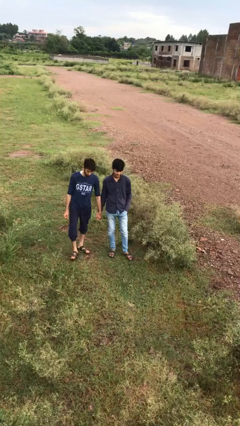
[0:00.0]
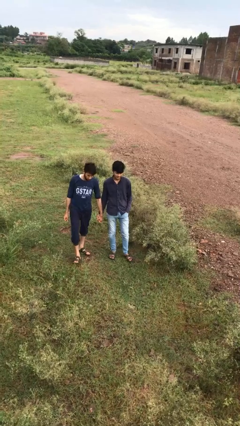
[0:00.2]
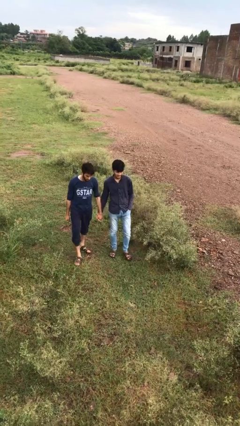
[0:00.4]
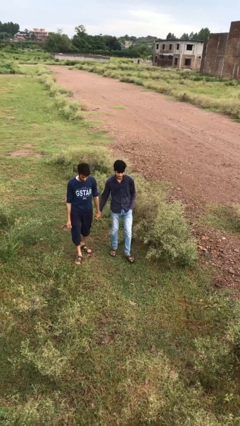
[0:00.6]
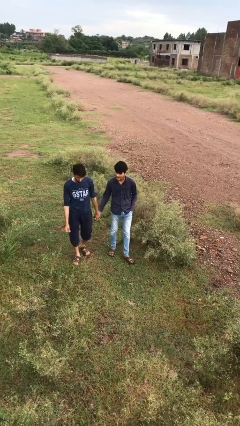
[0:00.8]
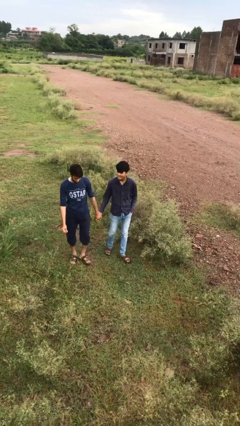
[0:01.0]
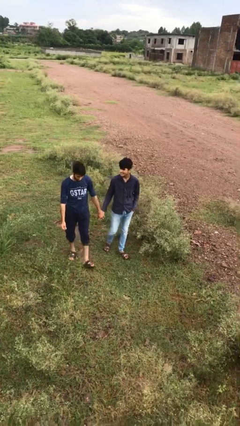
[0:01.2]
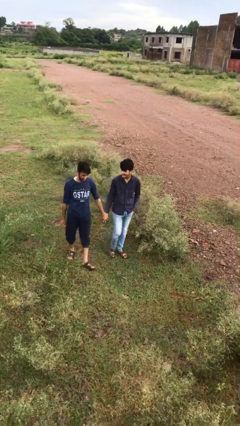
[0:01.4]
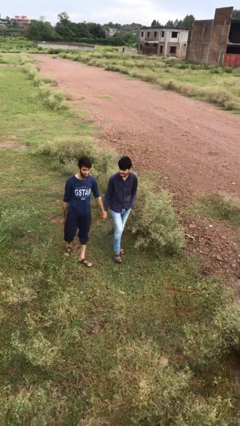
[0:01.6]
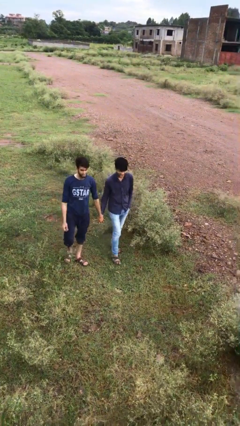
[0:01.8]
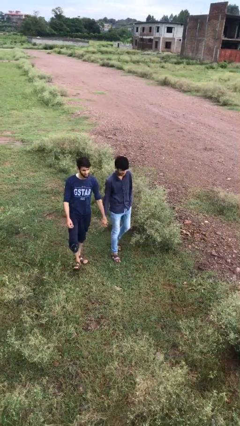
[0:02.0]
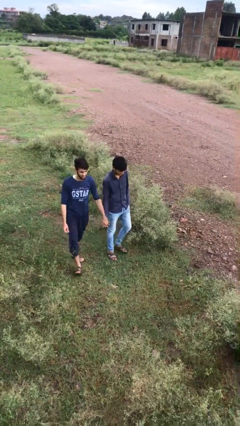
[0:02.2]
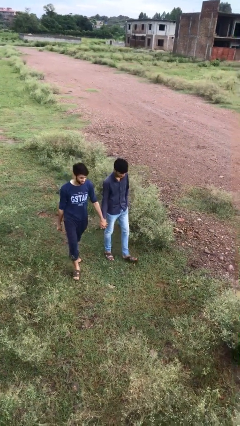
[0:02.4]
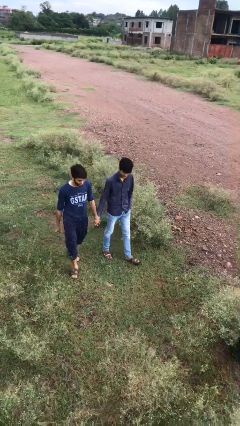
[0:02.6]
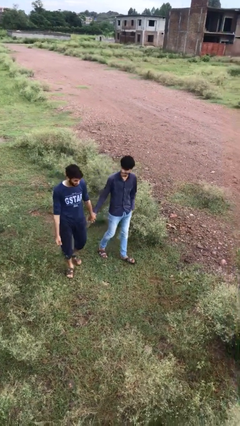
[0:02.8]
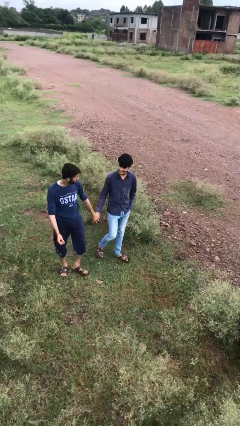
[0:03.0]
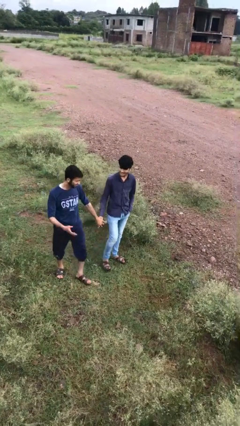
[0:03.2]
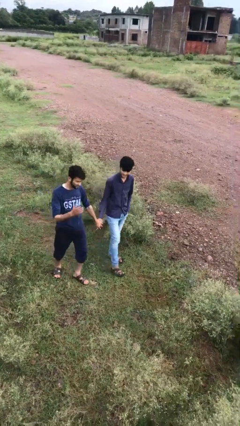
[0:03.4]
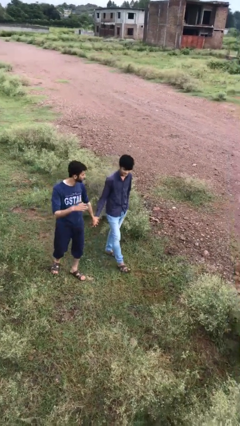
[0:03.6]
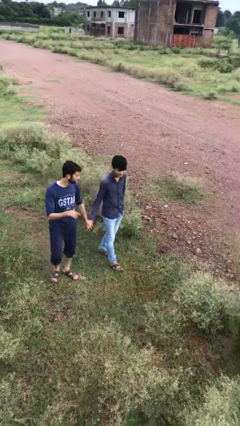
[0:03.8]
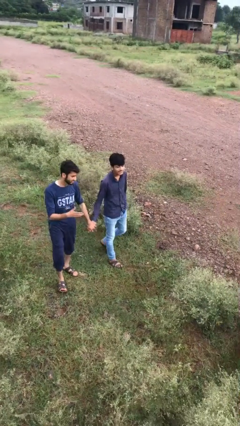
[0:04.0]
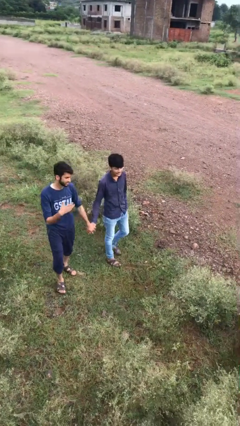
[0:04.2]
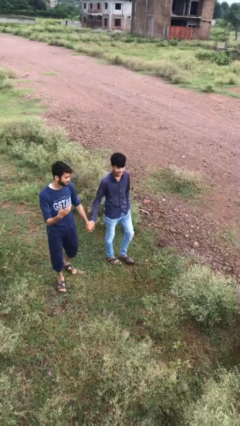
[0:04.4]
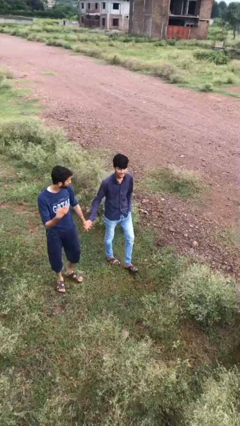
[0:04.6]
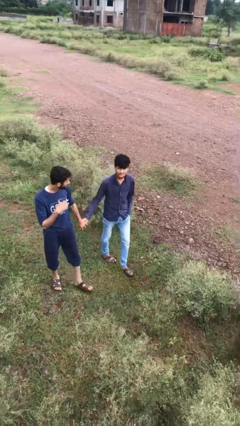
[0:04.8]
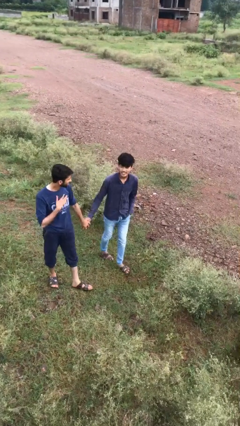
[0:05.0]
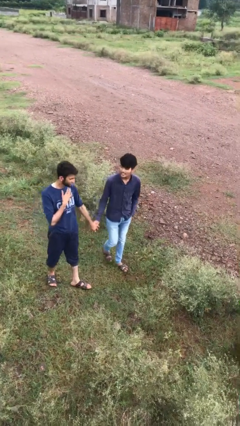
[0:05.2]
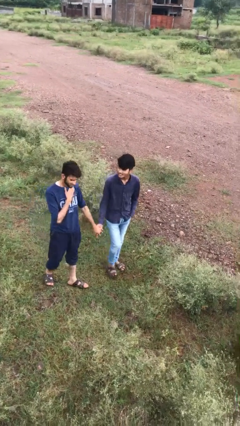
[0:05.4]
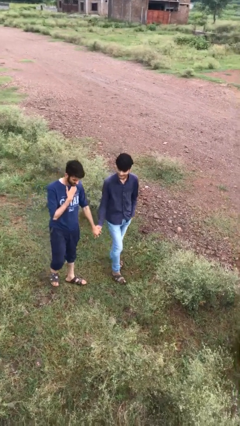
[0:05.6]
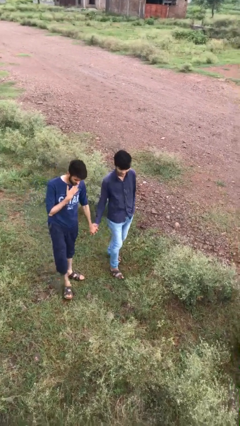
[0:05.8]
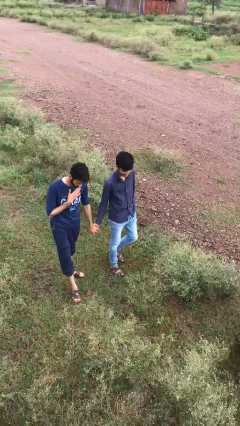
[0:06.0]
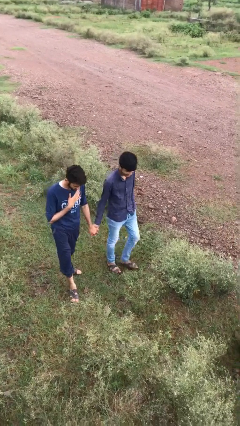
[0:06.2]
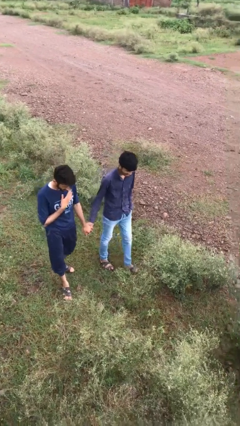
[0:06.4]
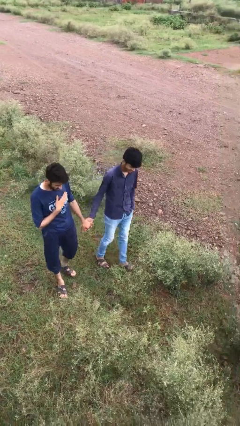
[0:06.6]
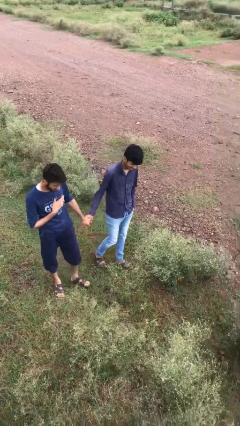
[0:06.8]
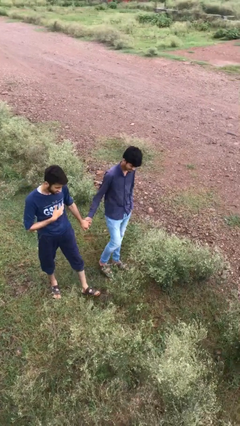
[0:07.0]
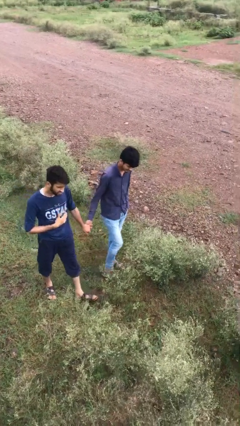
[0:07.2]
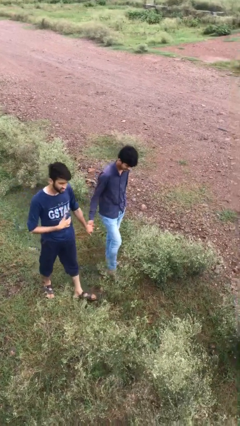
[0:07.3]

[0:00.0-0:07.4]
person holds hand

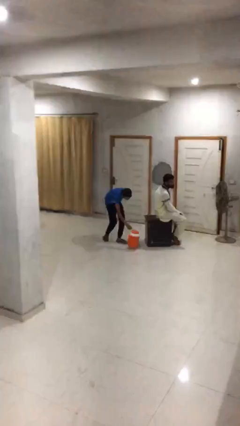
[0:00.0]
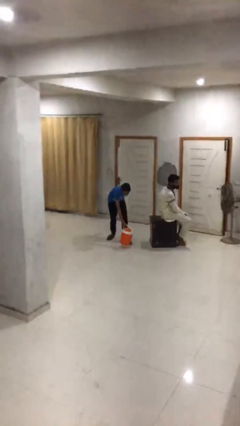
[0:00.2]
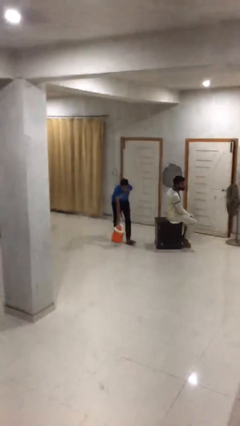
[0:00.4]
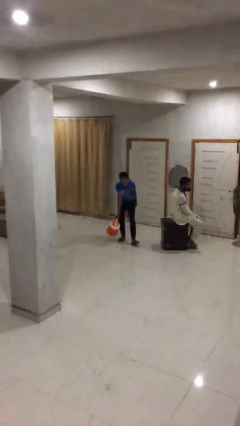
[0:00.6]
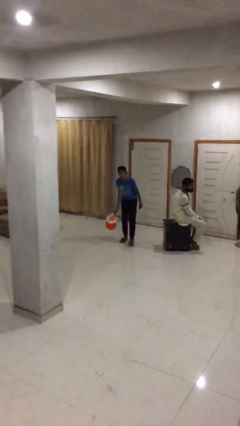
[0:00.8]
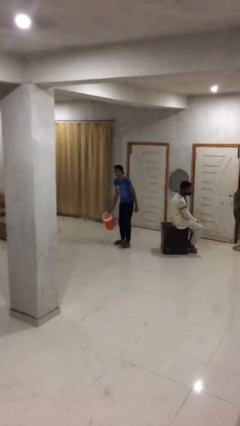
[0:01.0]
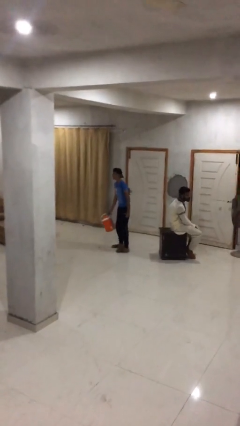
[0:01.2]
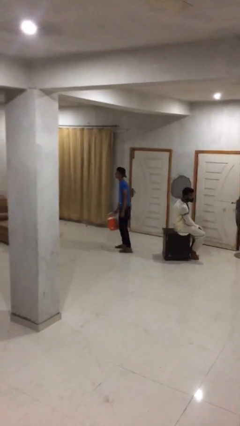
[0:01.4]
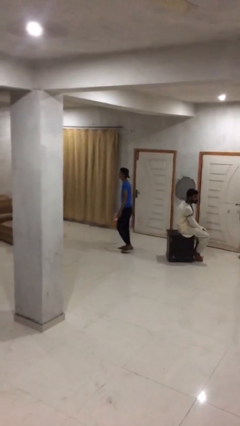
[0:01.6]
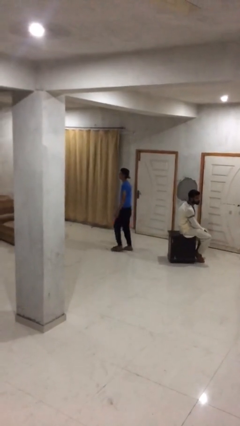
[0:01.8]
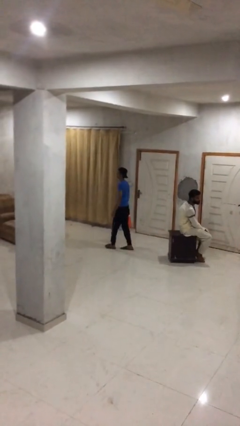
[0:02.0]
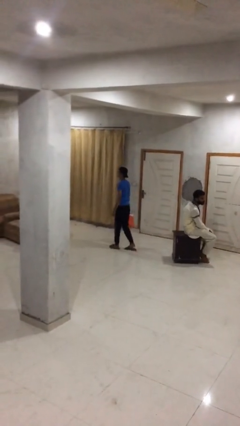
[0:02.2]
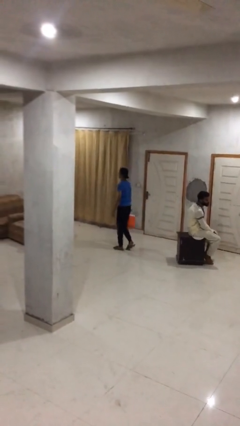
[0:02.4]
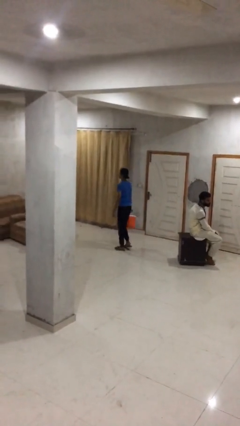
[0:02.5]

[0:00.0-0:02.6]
person steals object from person

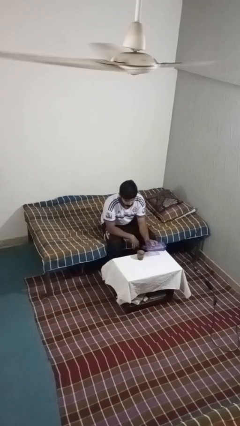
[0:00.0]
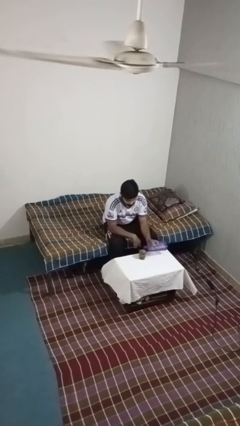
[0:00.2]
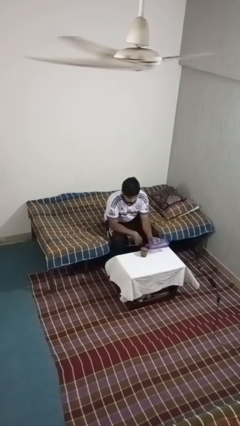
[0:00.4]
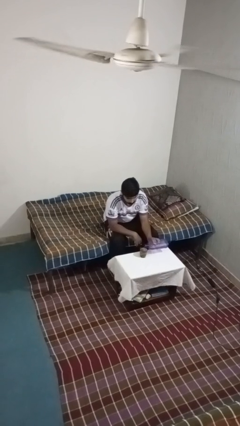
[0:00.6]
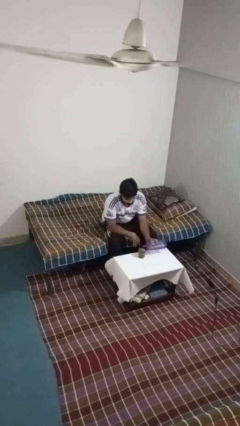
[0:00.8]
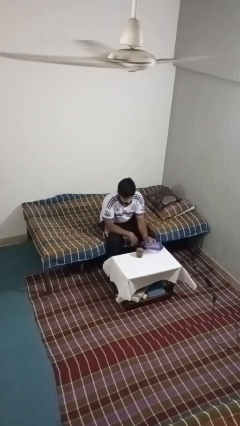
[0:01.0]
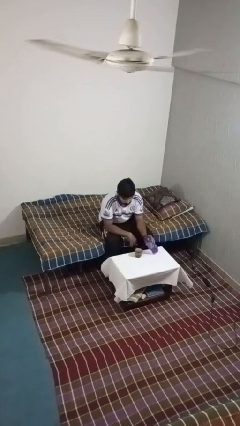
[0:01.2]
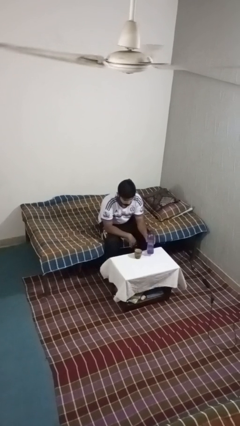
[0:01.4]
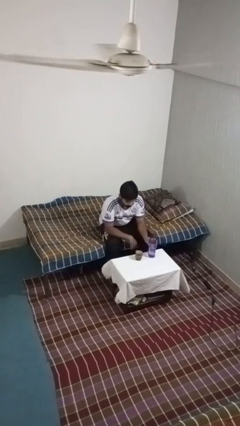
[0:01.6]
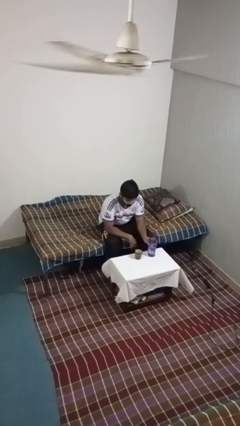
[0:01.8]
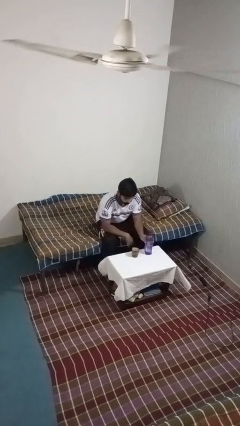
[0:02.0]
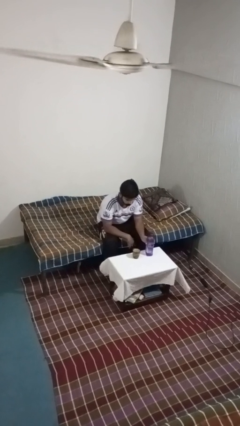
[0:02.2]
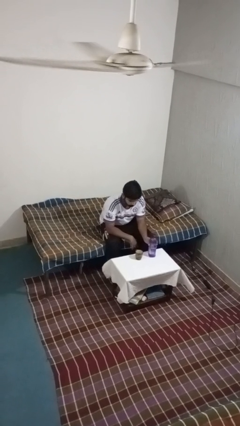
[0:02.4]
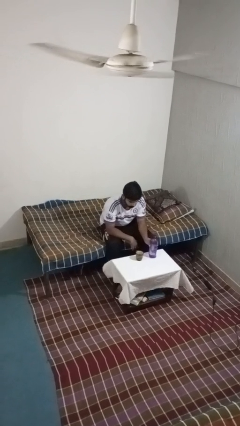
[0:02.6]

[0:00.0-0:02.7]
person pours liquid into cup

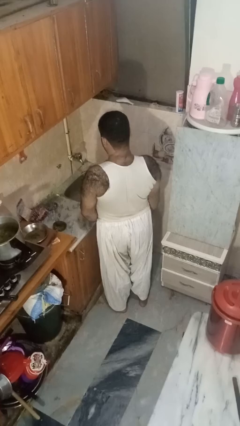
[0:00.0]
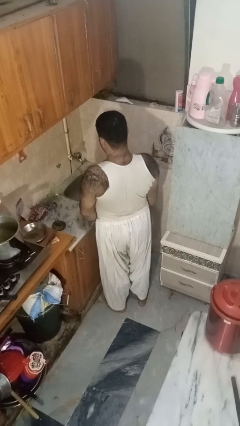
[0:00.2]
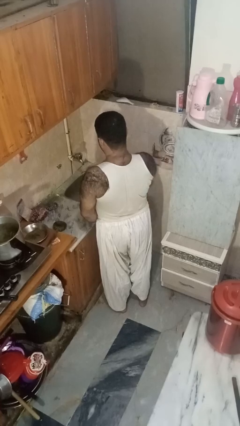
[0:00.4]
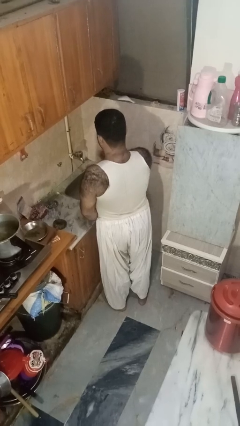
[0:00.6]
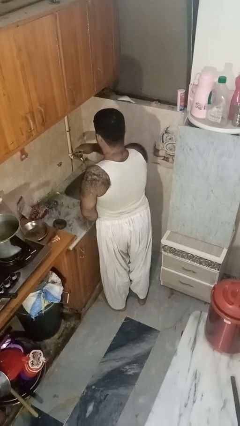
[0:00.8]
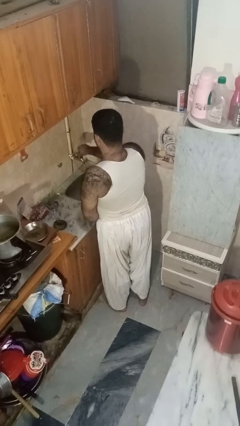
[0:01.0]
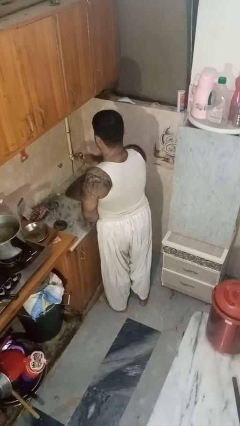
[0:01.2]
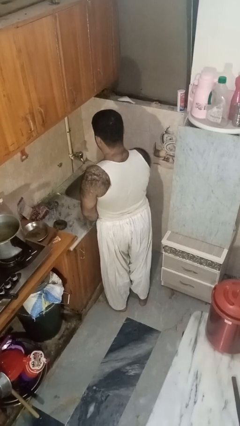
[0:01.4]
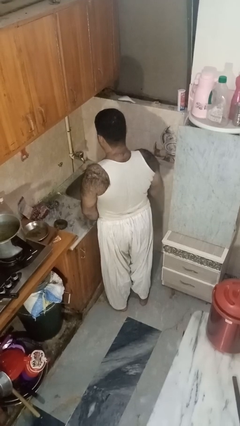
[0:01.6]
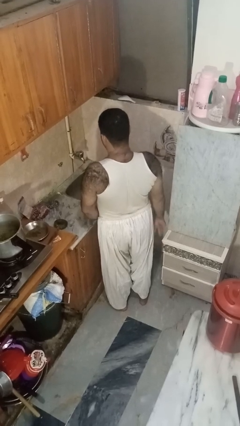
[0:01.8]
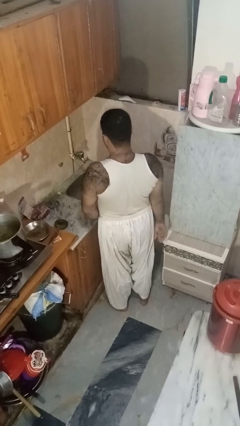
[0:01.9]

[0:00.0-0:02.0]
person turns off faucet

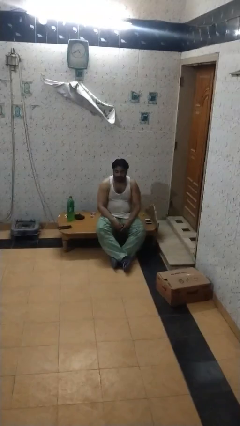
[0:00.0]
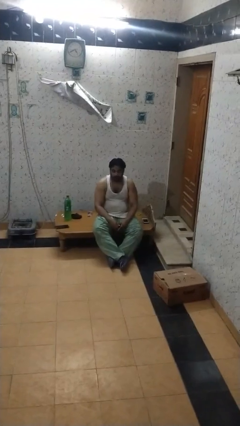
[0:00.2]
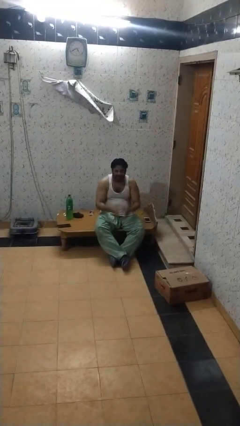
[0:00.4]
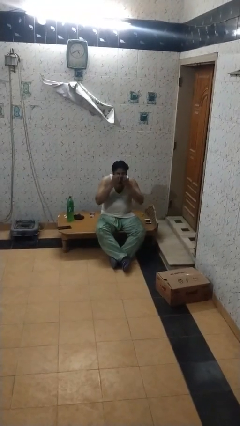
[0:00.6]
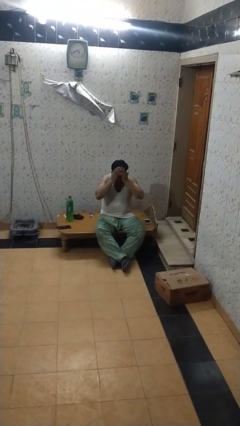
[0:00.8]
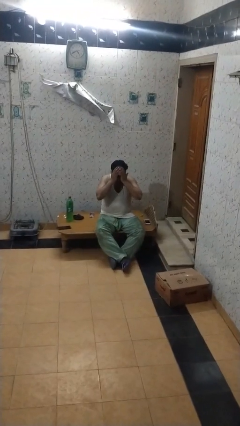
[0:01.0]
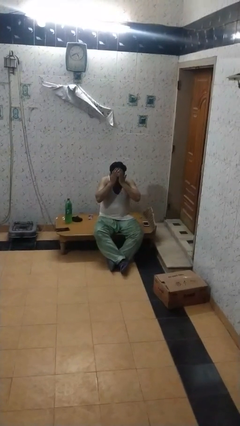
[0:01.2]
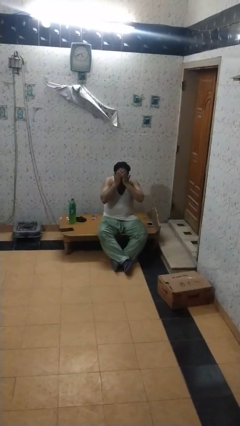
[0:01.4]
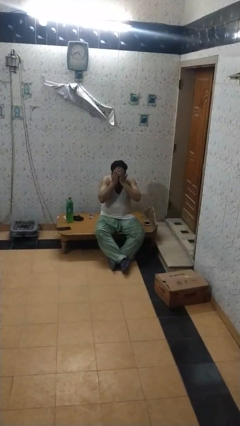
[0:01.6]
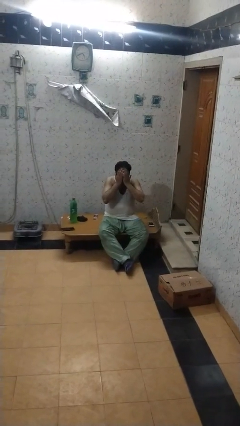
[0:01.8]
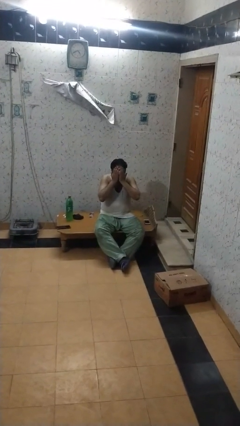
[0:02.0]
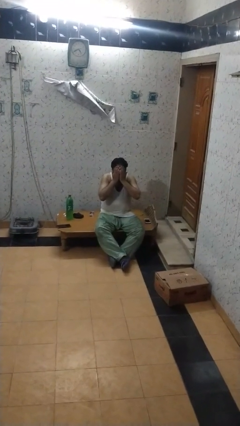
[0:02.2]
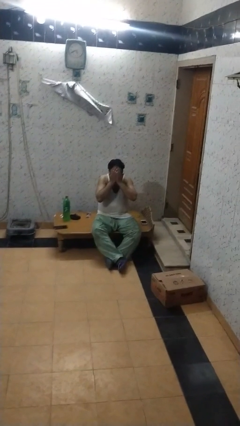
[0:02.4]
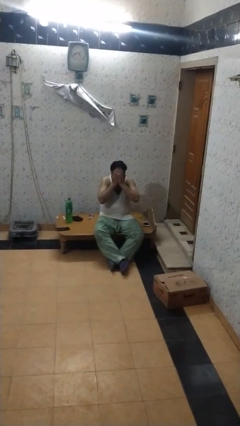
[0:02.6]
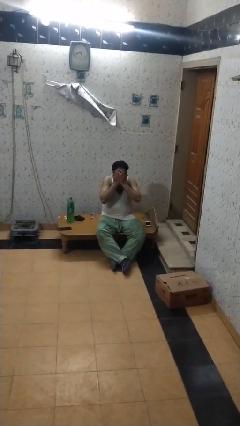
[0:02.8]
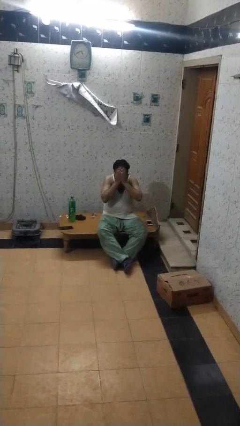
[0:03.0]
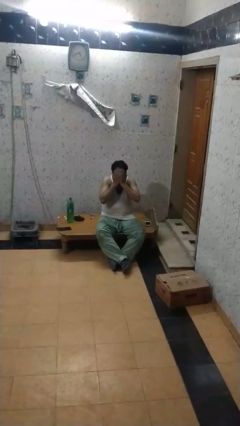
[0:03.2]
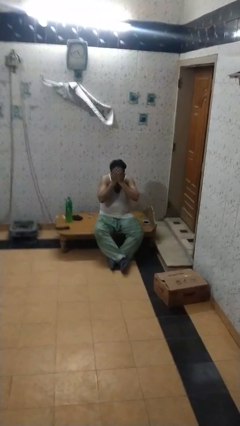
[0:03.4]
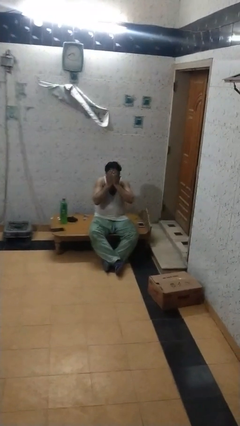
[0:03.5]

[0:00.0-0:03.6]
person covers face with hands
